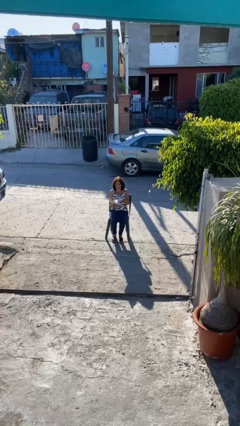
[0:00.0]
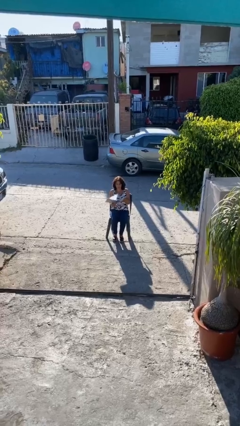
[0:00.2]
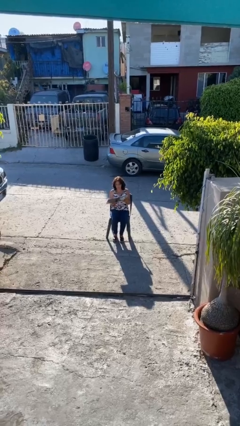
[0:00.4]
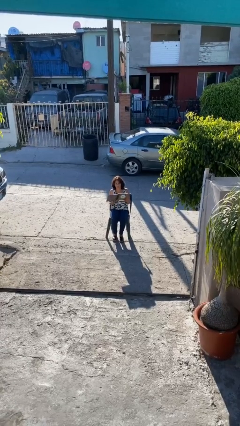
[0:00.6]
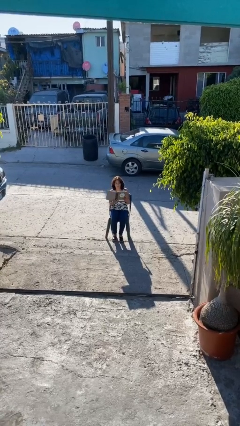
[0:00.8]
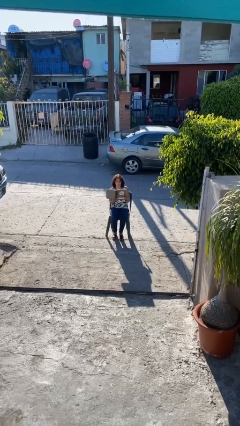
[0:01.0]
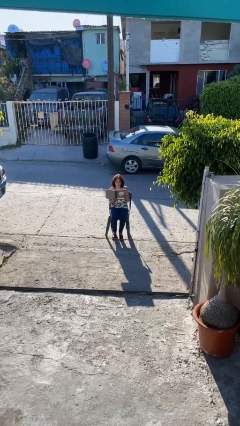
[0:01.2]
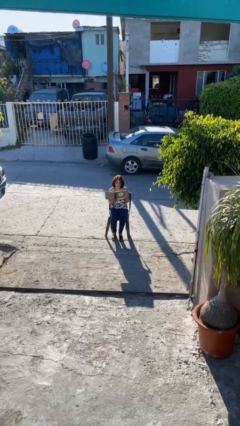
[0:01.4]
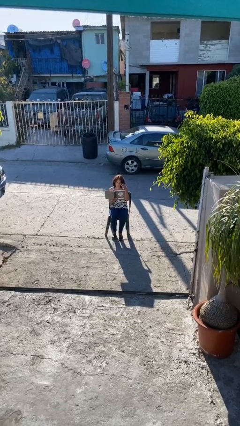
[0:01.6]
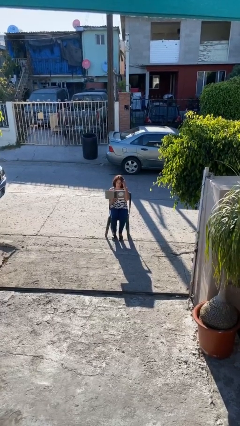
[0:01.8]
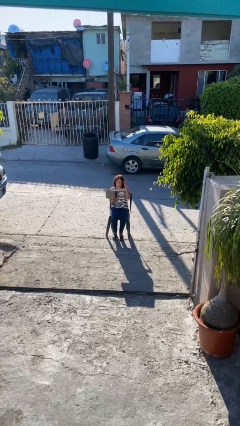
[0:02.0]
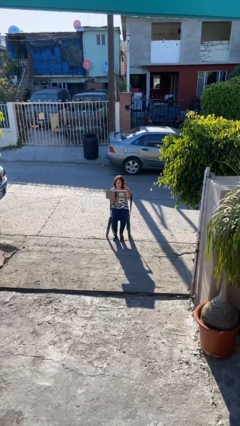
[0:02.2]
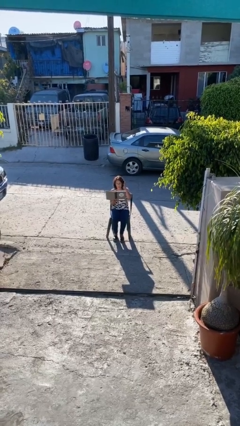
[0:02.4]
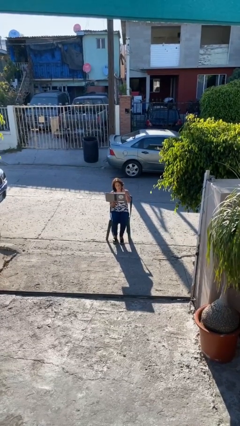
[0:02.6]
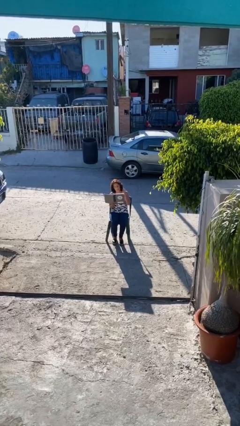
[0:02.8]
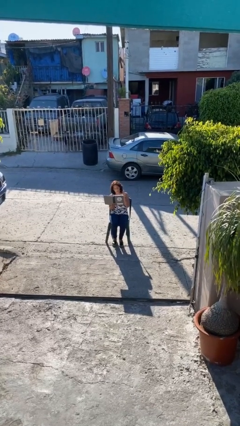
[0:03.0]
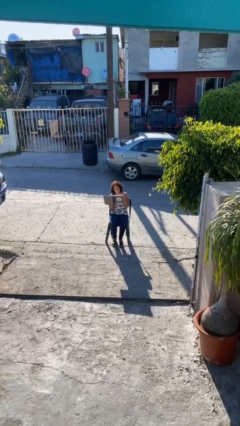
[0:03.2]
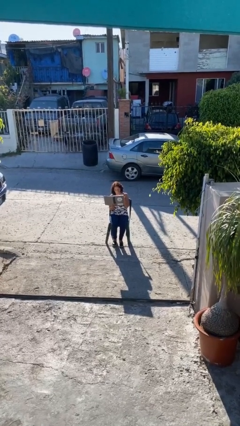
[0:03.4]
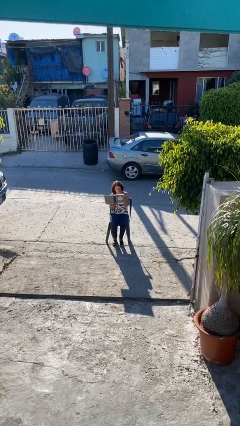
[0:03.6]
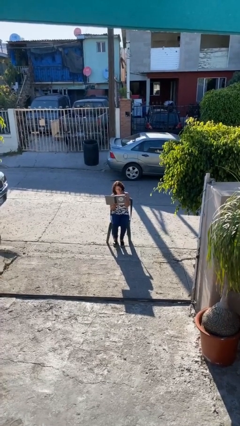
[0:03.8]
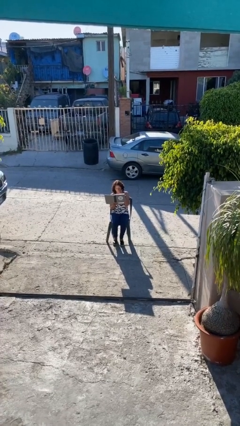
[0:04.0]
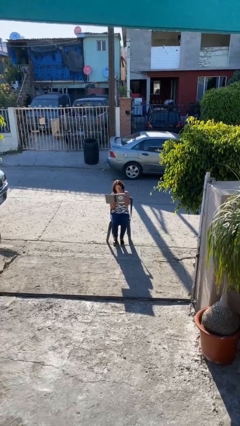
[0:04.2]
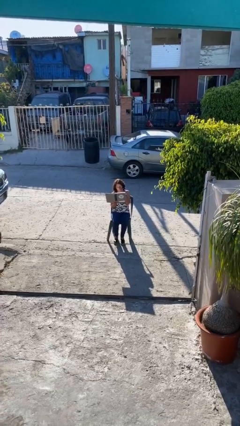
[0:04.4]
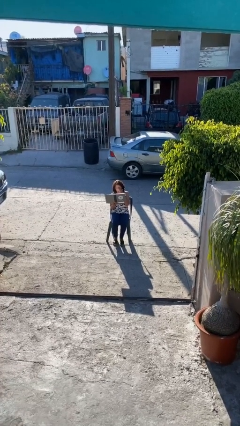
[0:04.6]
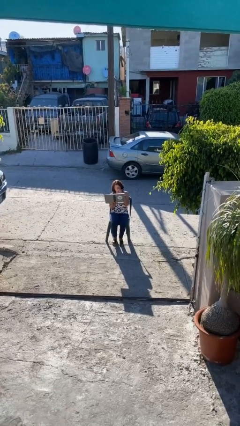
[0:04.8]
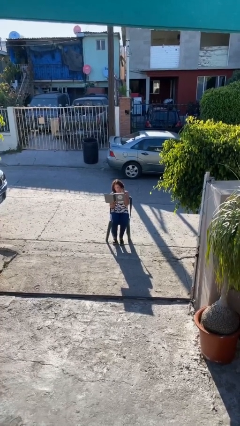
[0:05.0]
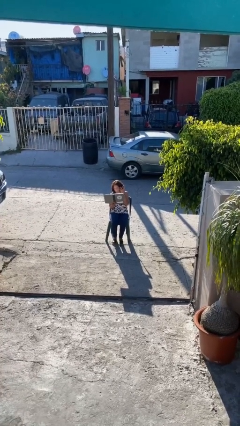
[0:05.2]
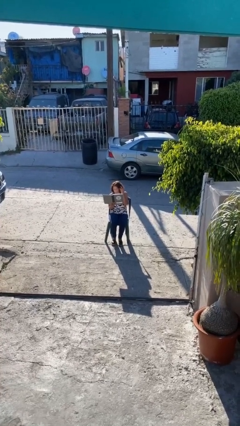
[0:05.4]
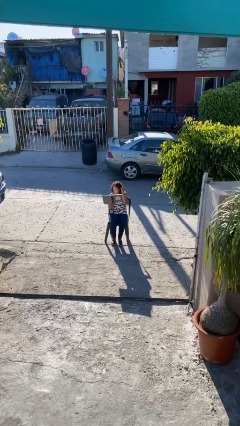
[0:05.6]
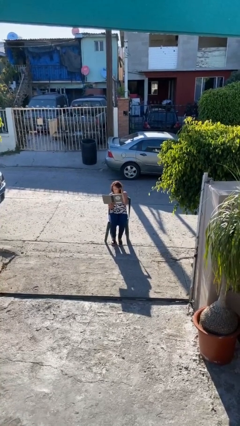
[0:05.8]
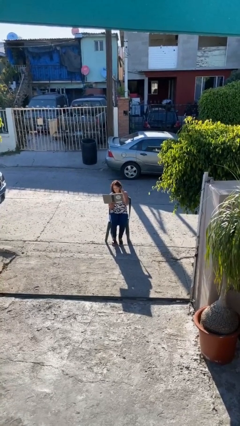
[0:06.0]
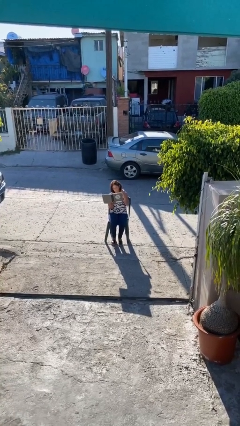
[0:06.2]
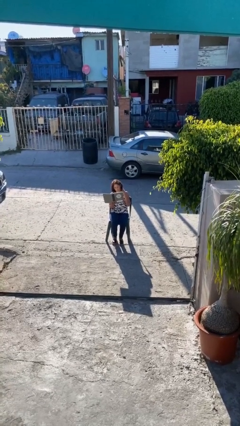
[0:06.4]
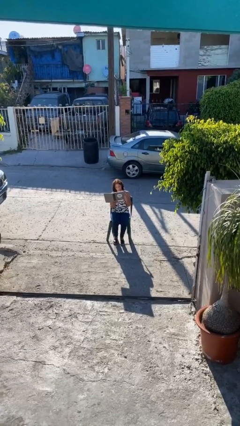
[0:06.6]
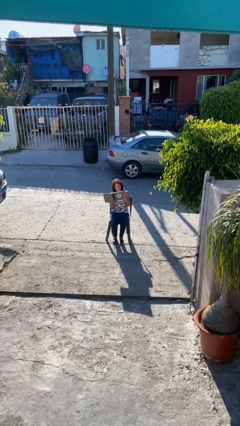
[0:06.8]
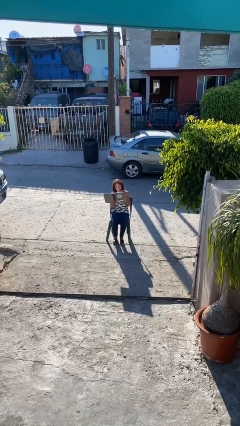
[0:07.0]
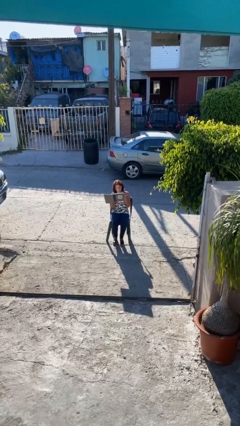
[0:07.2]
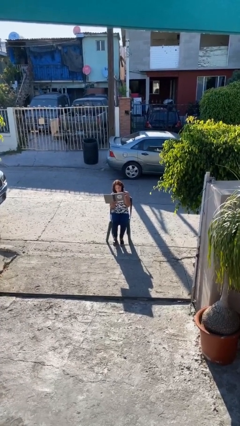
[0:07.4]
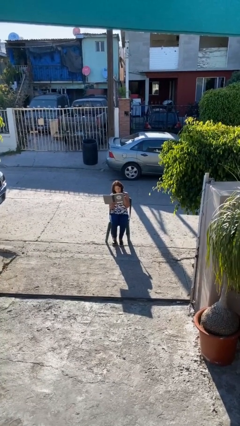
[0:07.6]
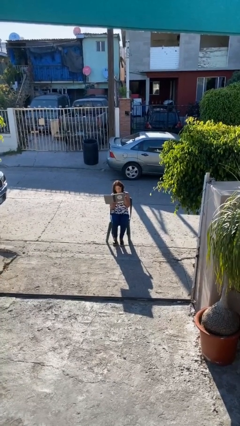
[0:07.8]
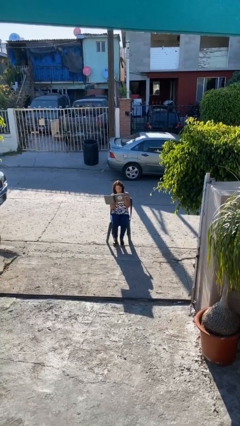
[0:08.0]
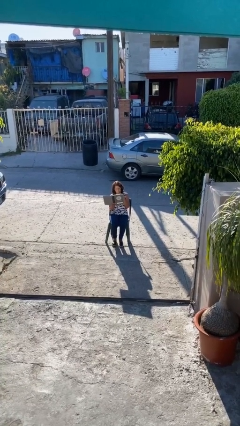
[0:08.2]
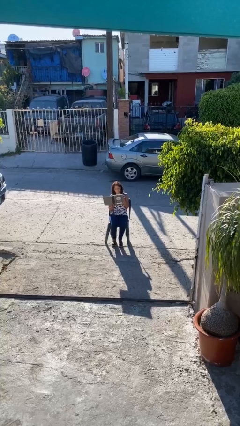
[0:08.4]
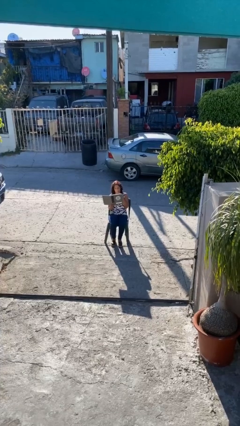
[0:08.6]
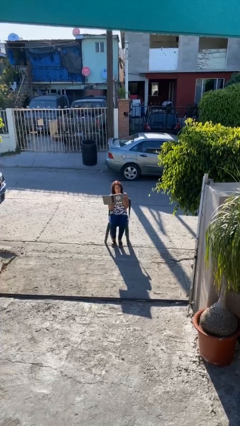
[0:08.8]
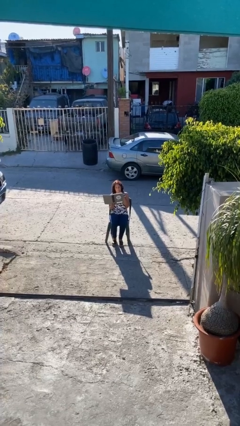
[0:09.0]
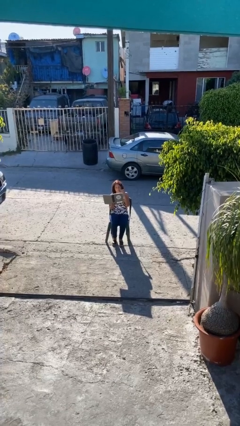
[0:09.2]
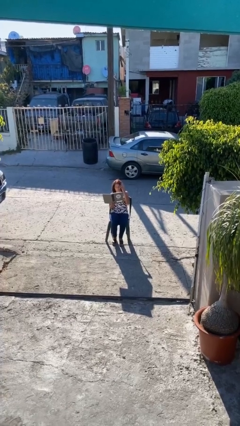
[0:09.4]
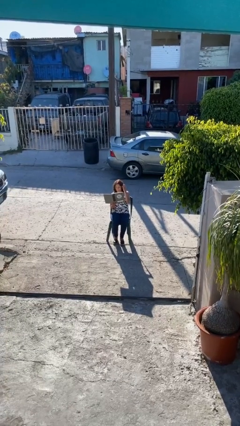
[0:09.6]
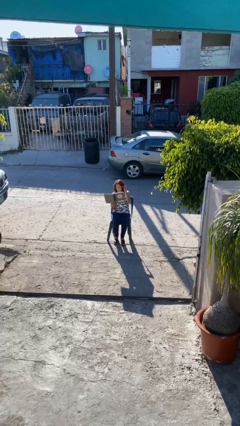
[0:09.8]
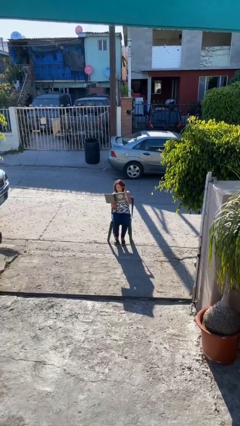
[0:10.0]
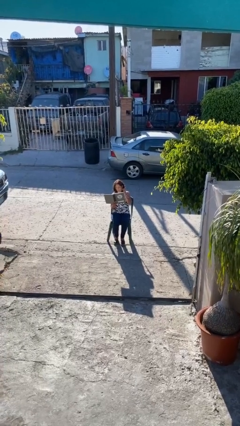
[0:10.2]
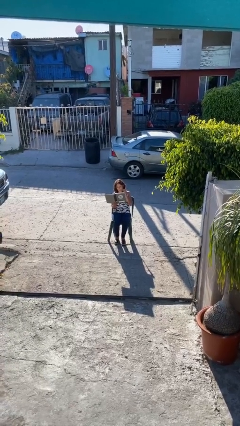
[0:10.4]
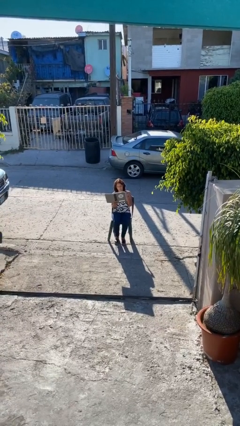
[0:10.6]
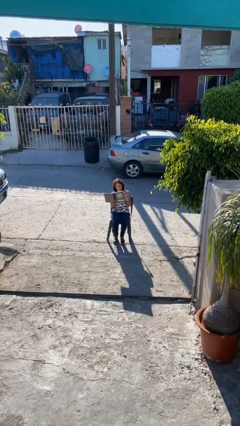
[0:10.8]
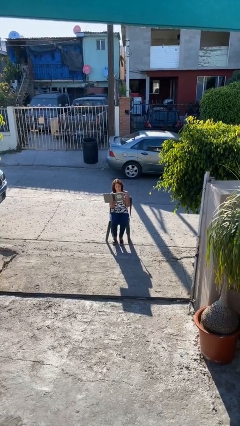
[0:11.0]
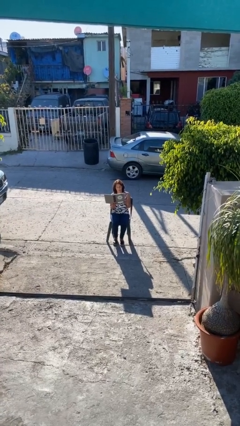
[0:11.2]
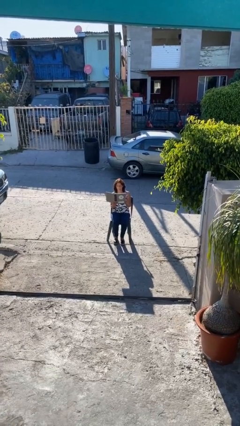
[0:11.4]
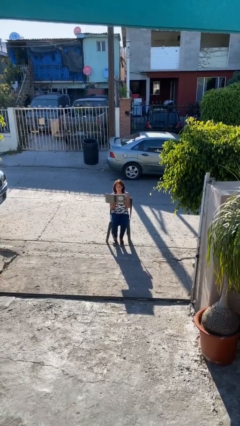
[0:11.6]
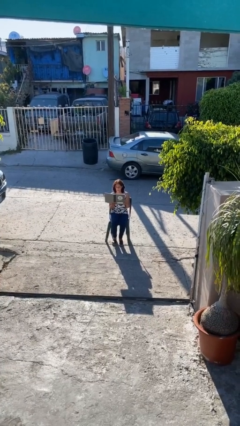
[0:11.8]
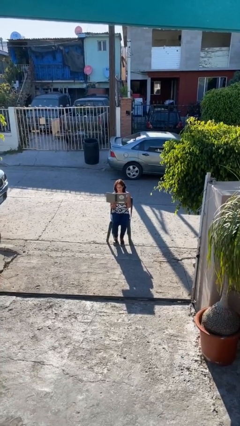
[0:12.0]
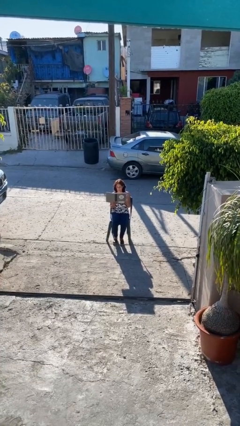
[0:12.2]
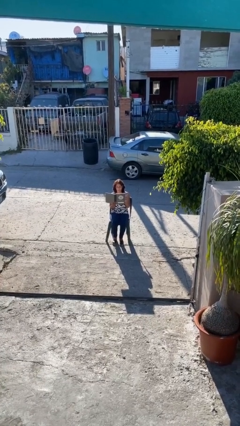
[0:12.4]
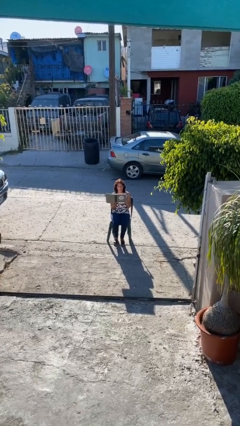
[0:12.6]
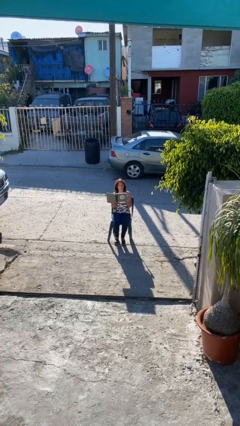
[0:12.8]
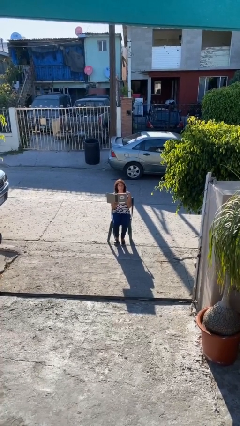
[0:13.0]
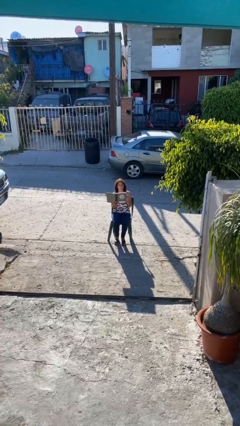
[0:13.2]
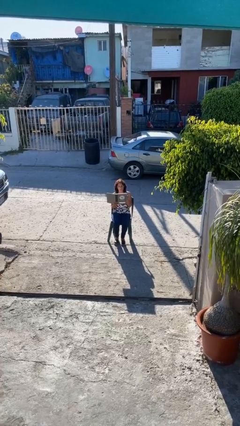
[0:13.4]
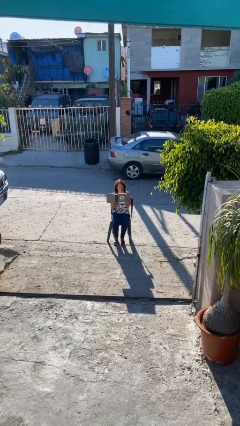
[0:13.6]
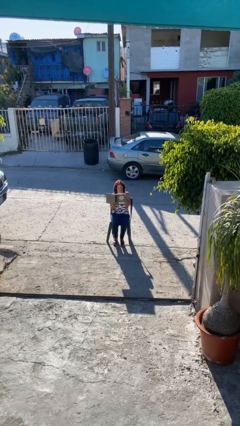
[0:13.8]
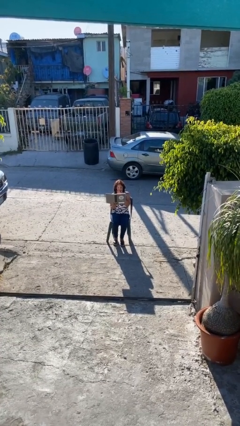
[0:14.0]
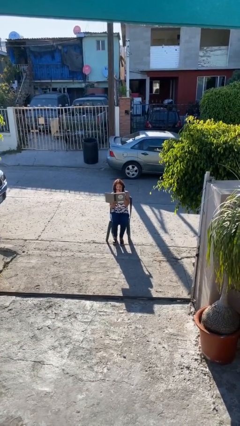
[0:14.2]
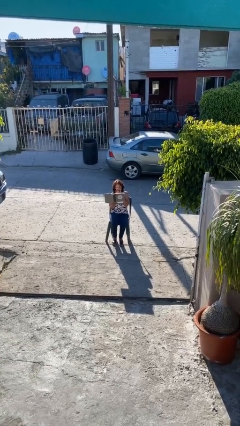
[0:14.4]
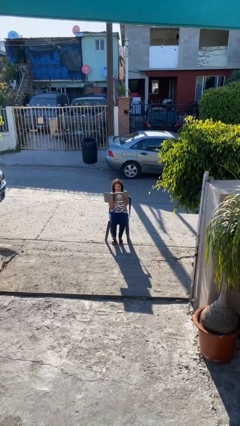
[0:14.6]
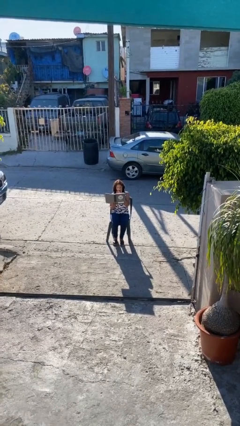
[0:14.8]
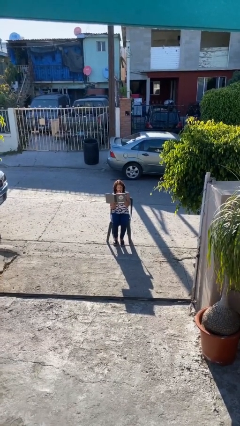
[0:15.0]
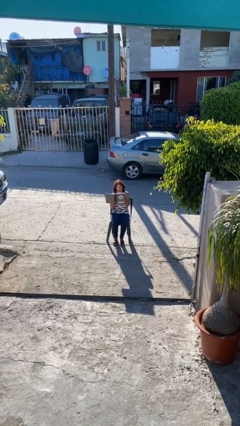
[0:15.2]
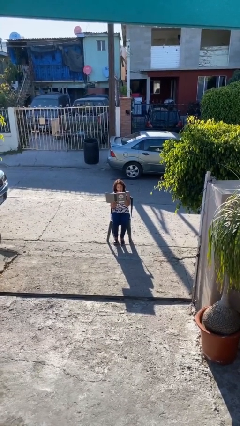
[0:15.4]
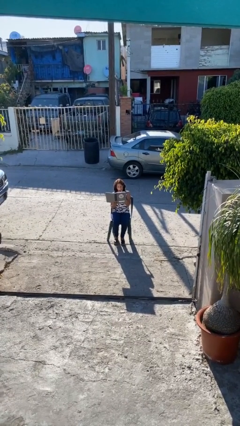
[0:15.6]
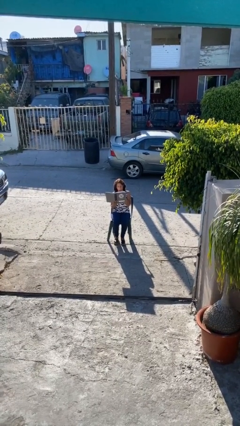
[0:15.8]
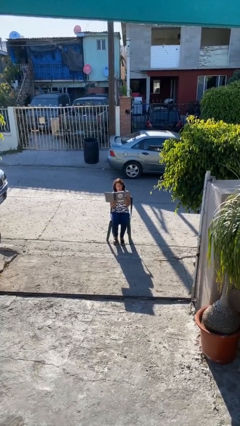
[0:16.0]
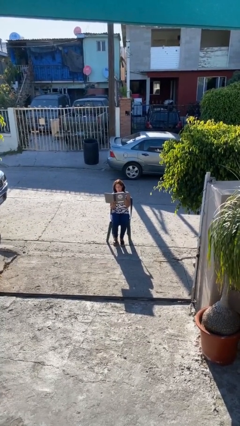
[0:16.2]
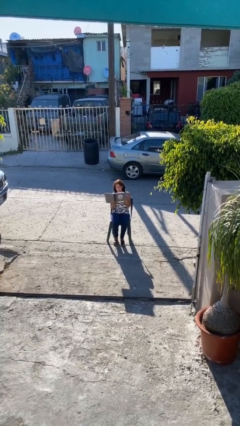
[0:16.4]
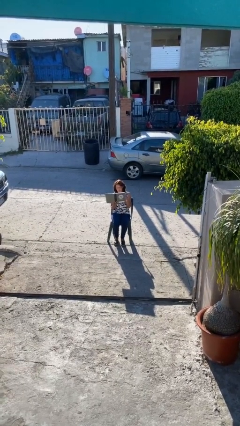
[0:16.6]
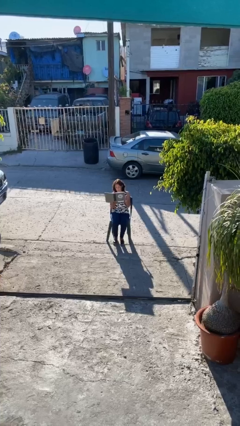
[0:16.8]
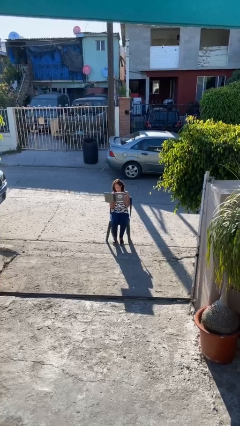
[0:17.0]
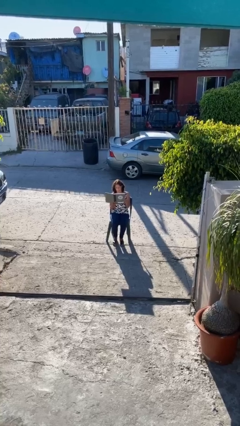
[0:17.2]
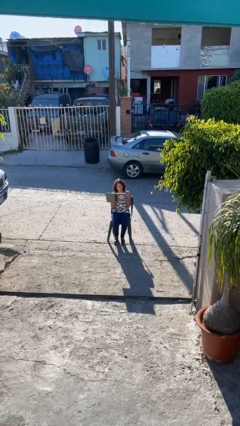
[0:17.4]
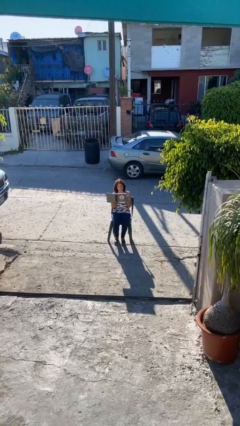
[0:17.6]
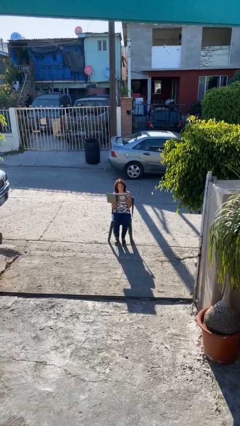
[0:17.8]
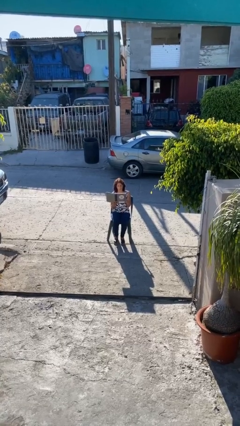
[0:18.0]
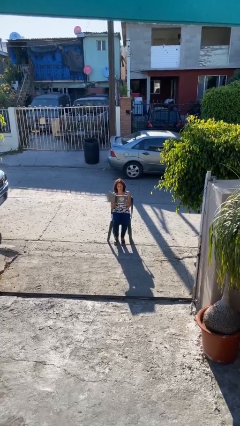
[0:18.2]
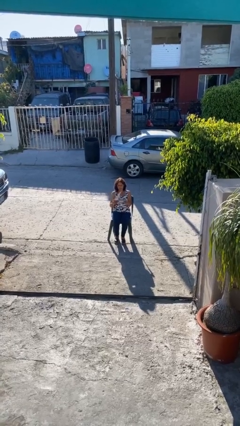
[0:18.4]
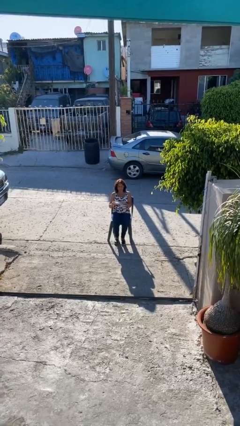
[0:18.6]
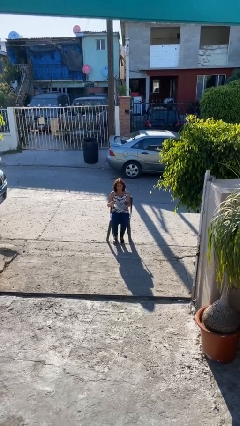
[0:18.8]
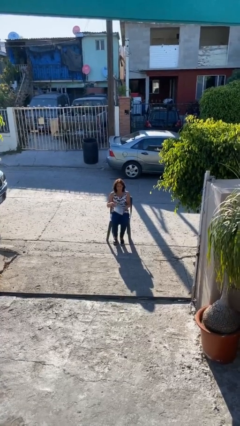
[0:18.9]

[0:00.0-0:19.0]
person reads document
